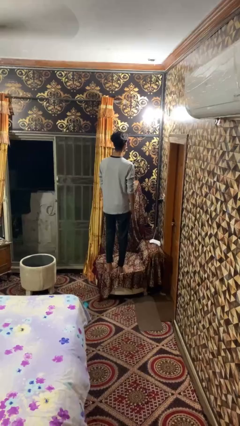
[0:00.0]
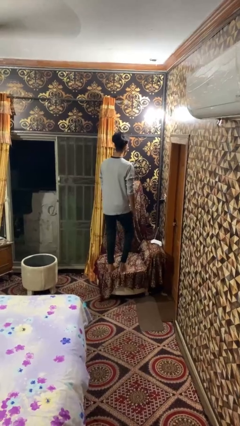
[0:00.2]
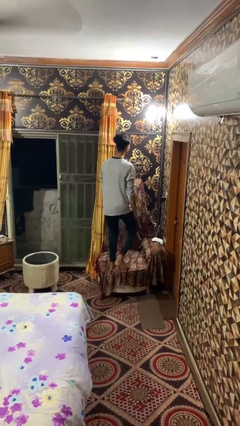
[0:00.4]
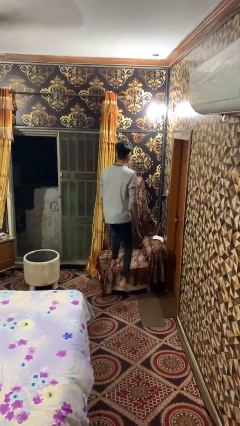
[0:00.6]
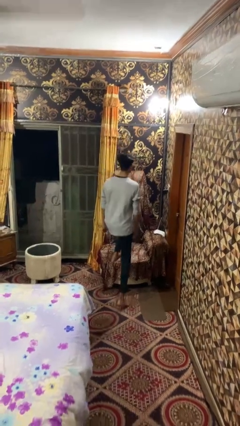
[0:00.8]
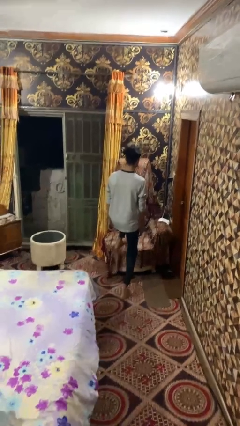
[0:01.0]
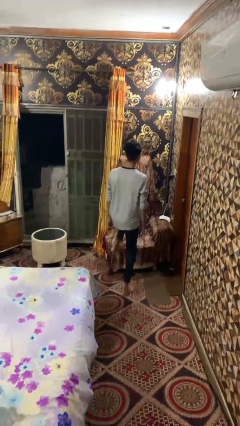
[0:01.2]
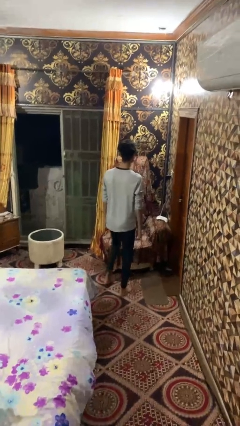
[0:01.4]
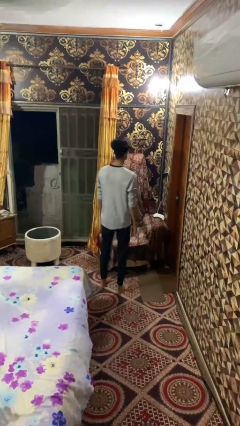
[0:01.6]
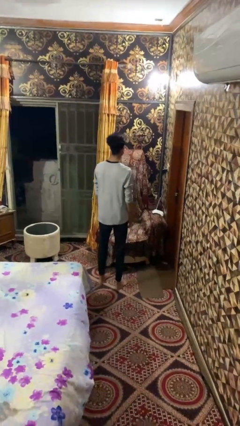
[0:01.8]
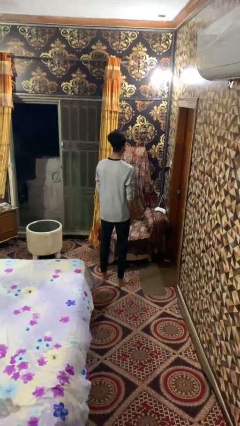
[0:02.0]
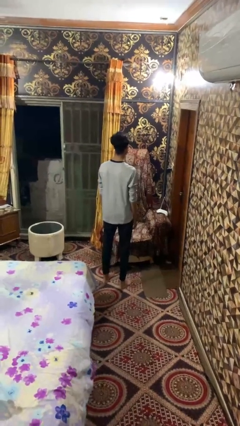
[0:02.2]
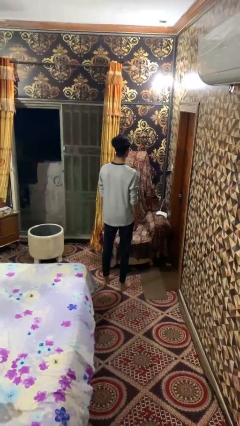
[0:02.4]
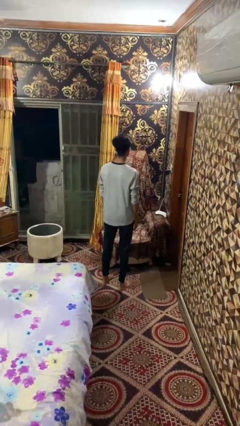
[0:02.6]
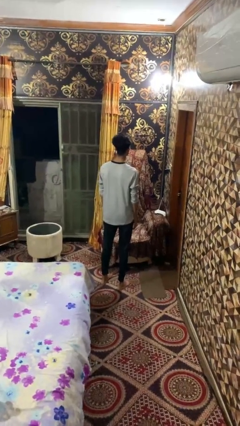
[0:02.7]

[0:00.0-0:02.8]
person climbs off couch

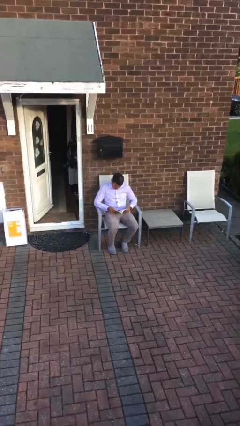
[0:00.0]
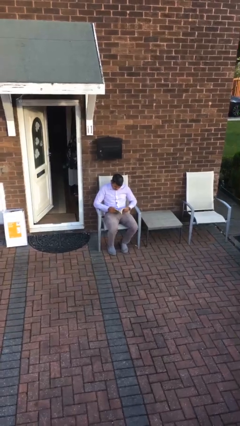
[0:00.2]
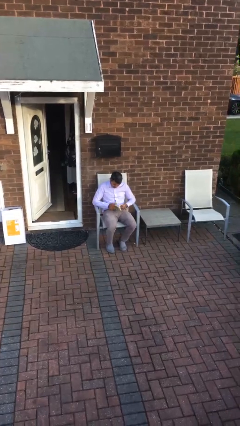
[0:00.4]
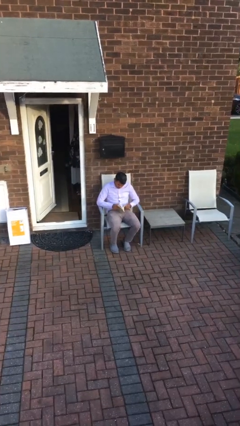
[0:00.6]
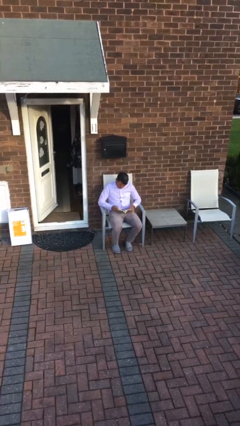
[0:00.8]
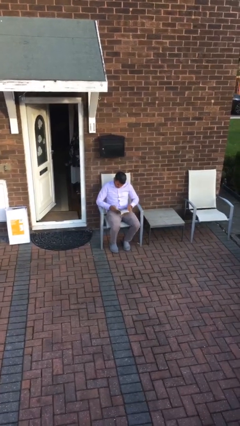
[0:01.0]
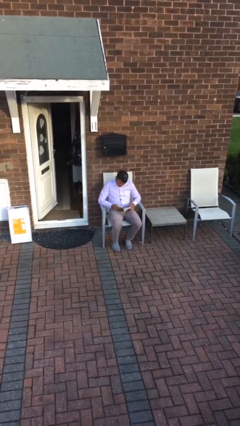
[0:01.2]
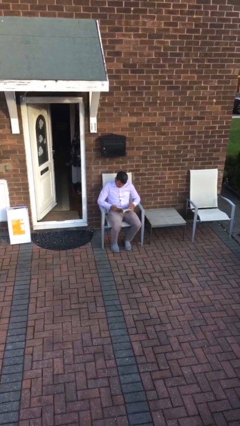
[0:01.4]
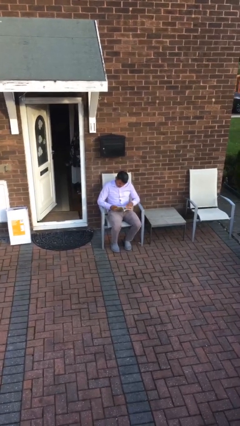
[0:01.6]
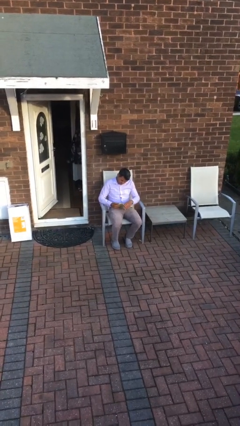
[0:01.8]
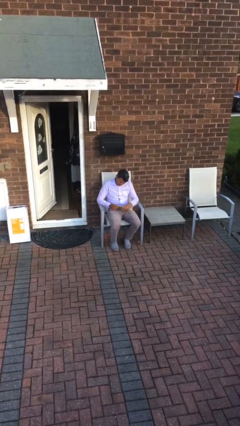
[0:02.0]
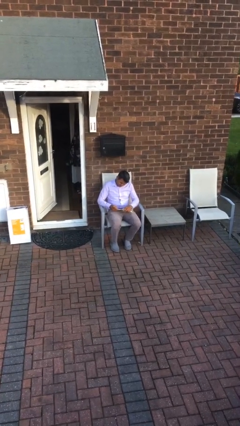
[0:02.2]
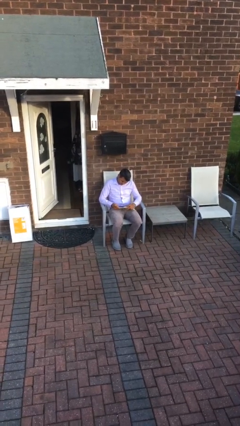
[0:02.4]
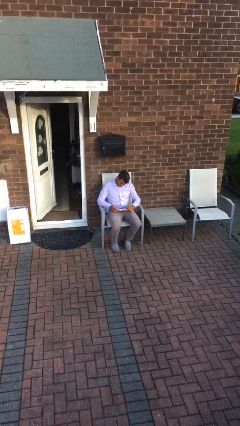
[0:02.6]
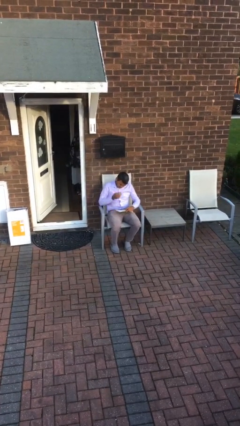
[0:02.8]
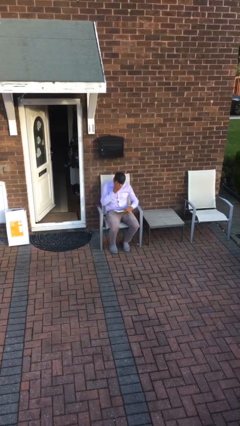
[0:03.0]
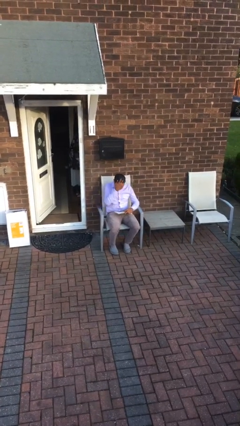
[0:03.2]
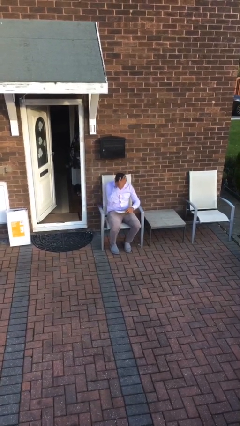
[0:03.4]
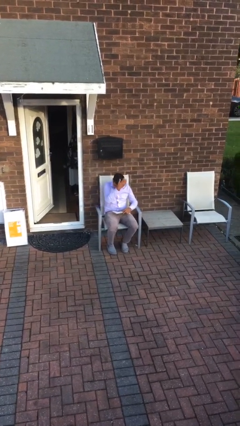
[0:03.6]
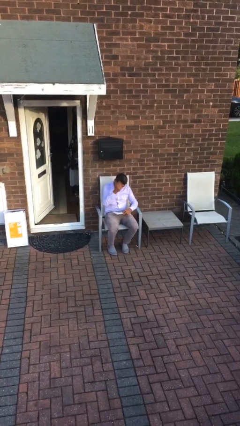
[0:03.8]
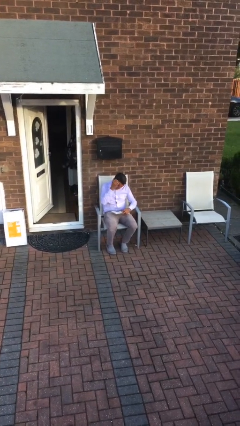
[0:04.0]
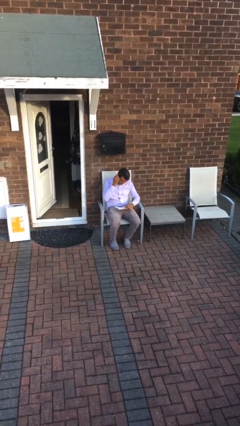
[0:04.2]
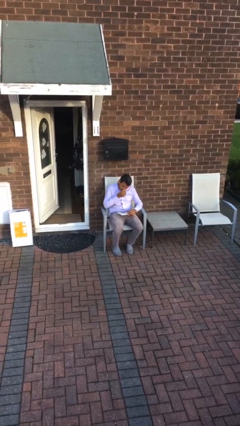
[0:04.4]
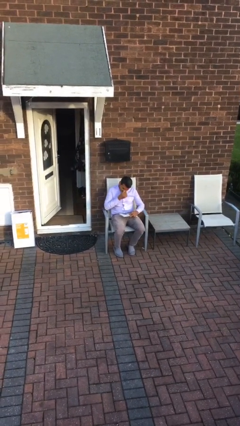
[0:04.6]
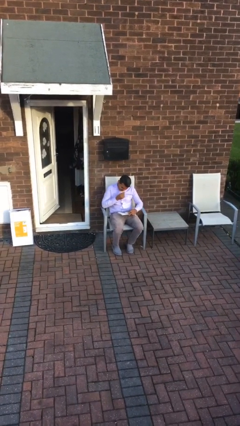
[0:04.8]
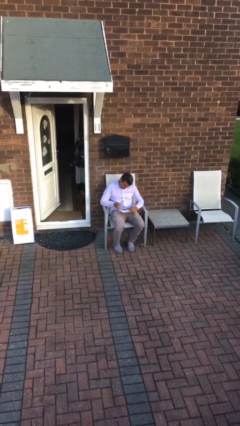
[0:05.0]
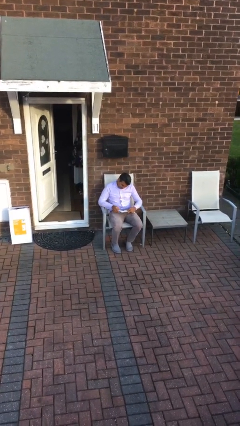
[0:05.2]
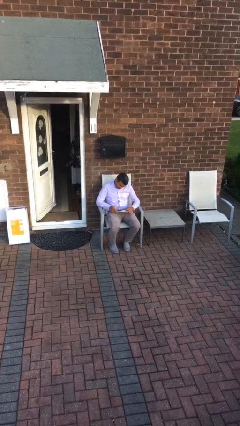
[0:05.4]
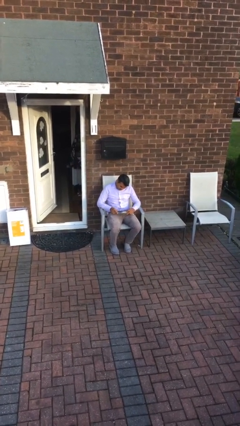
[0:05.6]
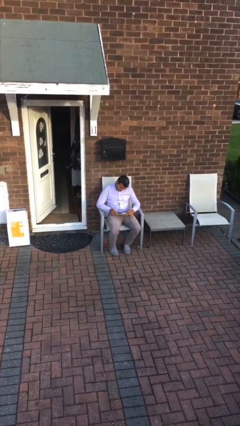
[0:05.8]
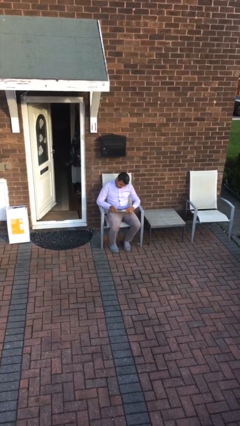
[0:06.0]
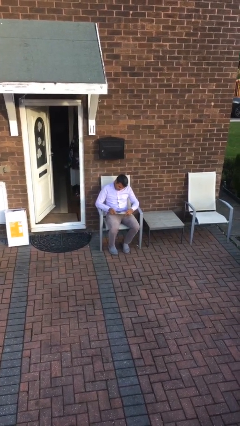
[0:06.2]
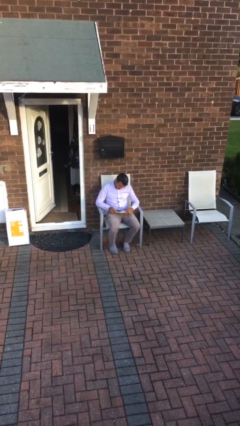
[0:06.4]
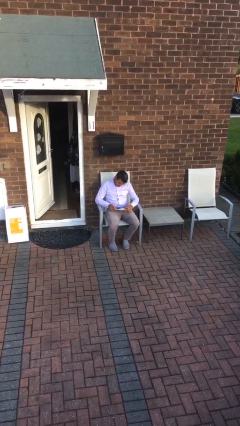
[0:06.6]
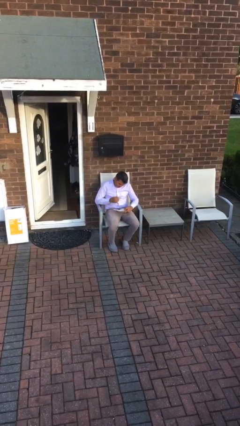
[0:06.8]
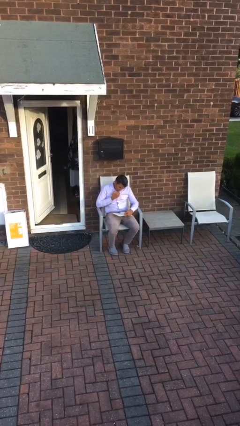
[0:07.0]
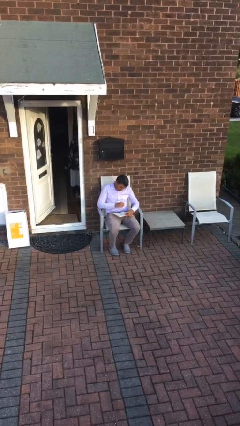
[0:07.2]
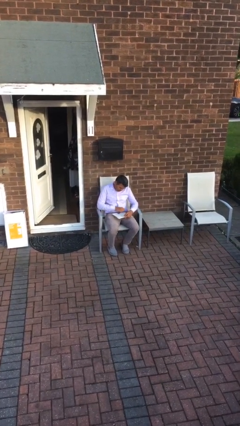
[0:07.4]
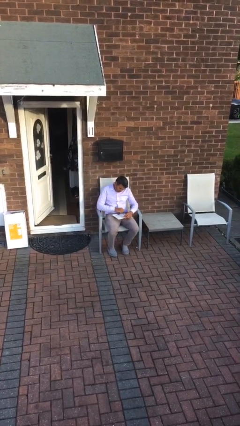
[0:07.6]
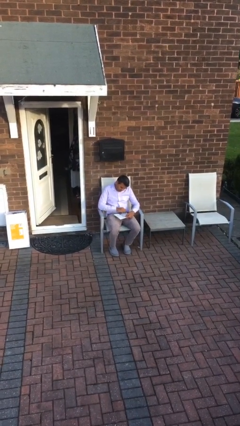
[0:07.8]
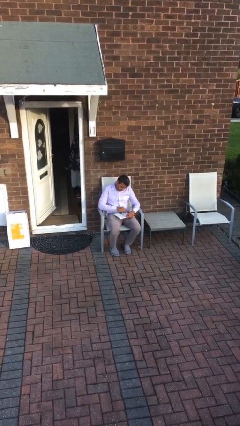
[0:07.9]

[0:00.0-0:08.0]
person reads document

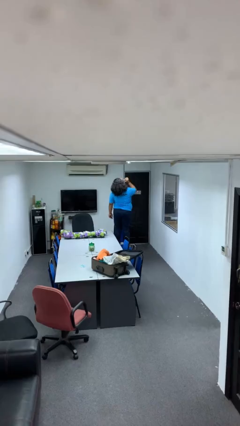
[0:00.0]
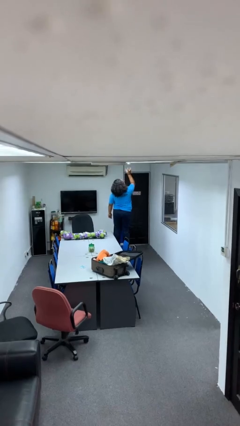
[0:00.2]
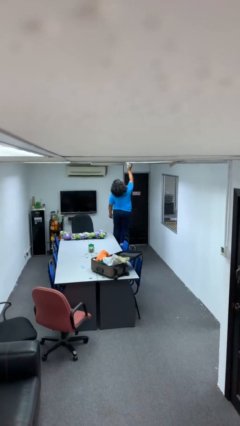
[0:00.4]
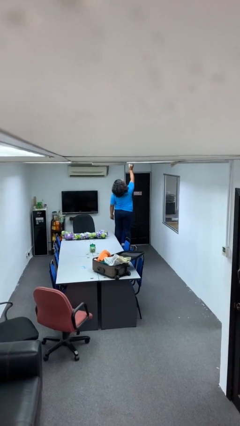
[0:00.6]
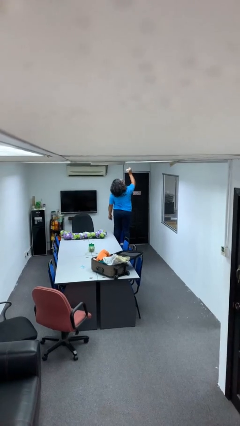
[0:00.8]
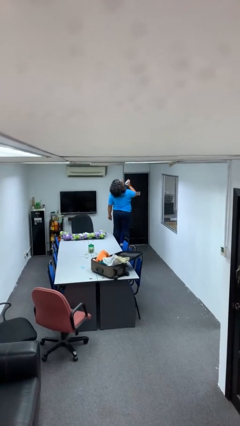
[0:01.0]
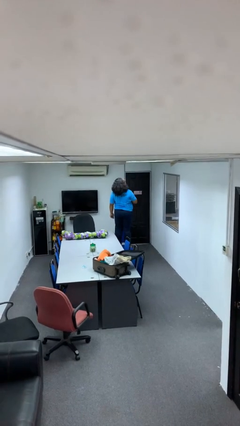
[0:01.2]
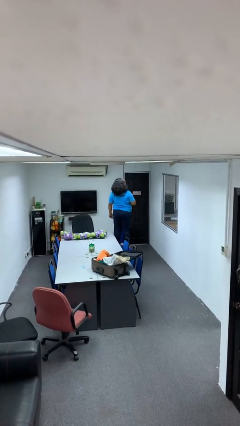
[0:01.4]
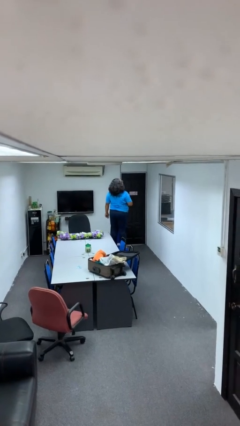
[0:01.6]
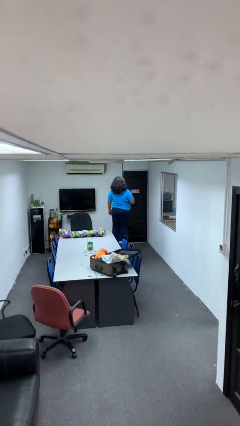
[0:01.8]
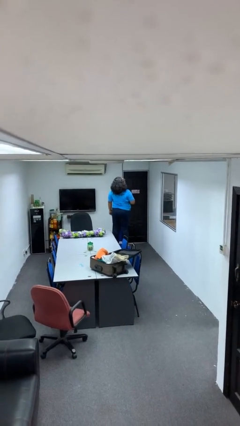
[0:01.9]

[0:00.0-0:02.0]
person takes down smoke detector

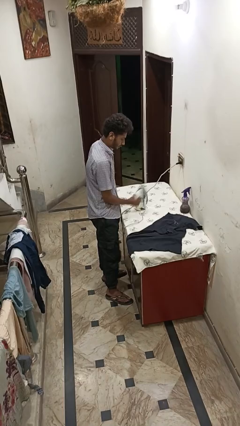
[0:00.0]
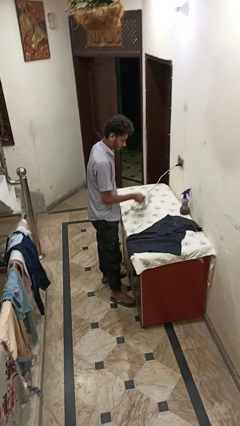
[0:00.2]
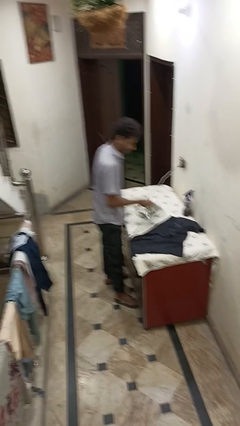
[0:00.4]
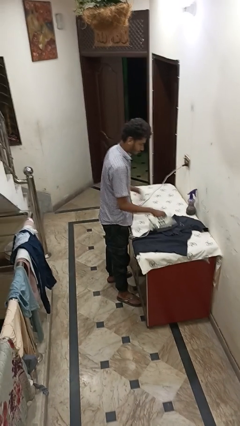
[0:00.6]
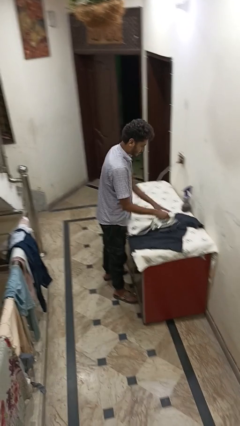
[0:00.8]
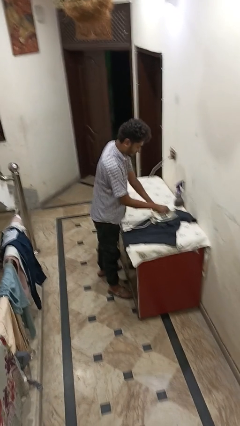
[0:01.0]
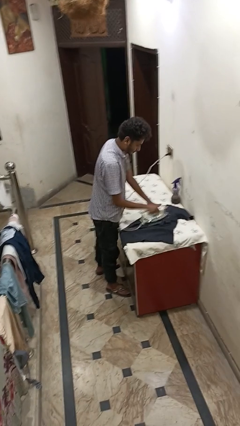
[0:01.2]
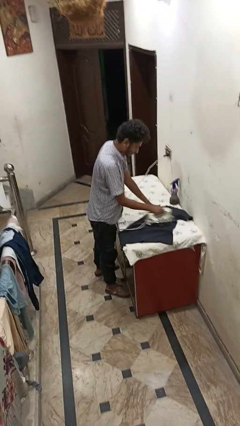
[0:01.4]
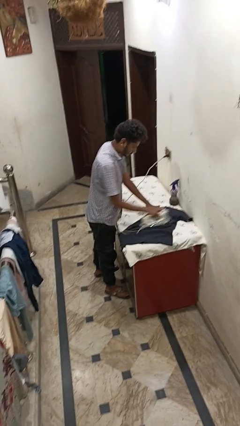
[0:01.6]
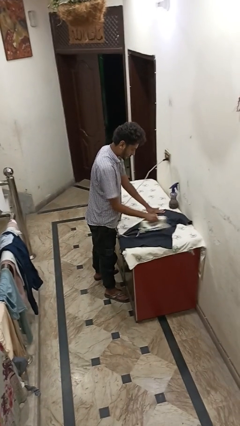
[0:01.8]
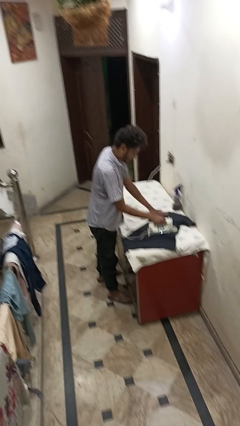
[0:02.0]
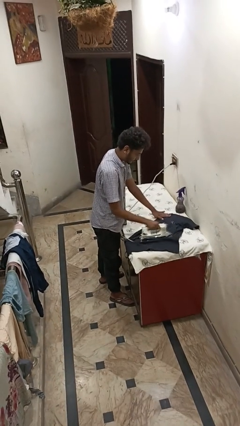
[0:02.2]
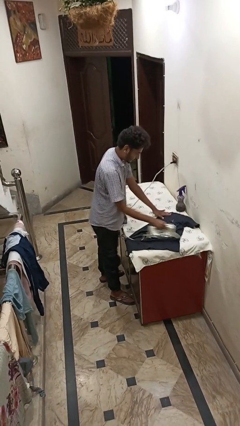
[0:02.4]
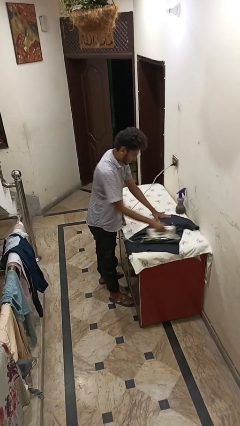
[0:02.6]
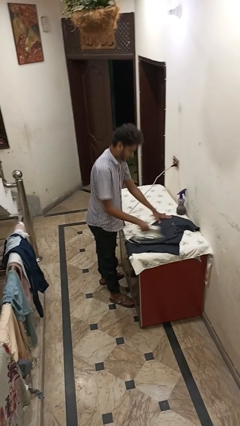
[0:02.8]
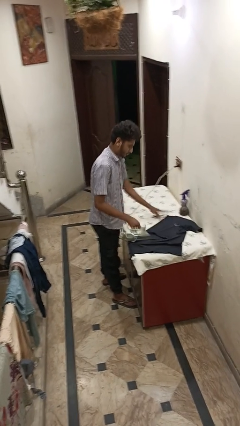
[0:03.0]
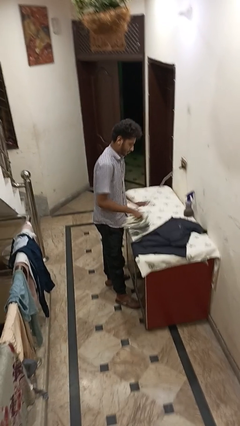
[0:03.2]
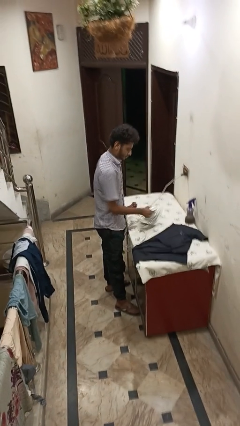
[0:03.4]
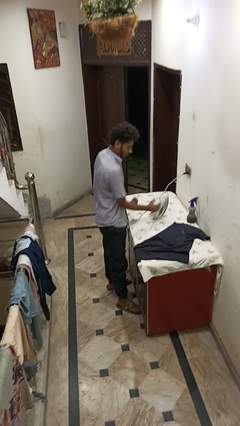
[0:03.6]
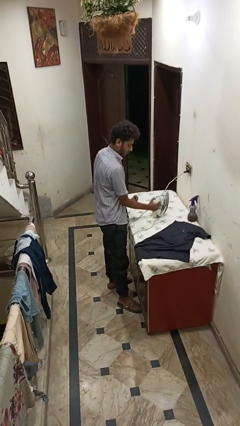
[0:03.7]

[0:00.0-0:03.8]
person irons clothes

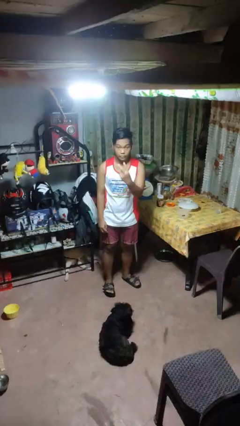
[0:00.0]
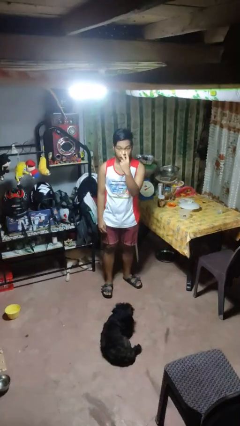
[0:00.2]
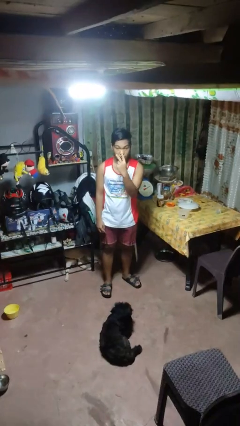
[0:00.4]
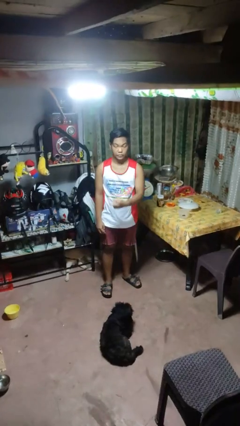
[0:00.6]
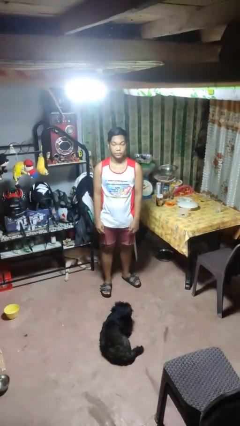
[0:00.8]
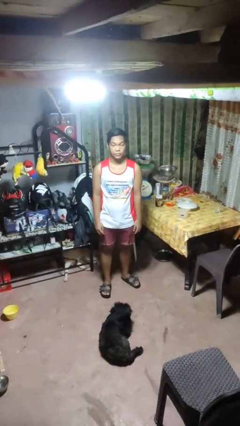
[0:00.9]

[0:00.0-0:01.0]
person gestures watch closely
